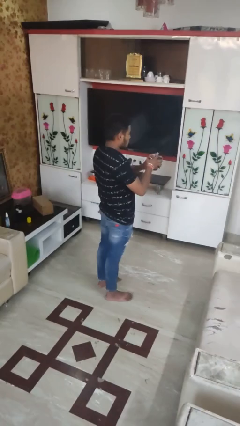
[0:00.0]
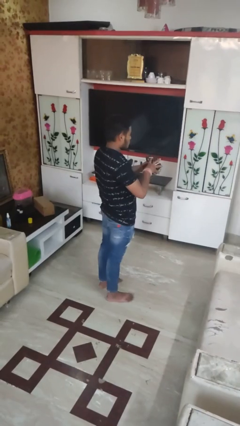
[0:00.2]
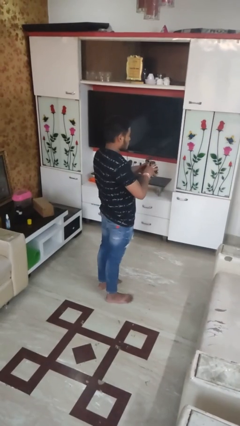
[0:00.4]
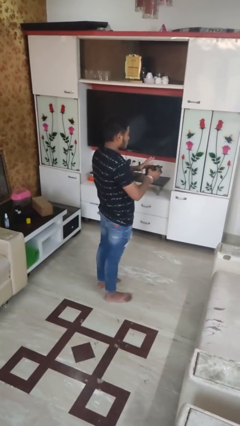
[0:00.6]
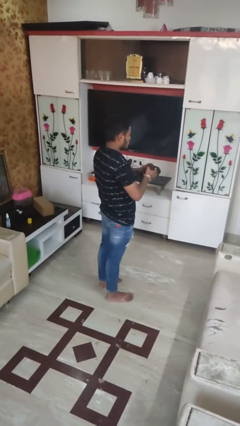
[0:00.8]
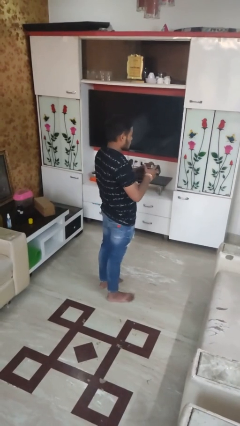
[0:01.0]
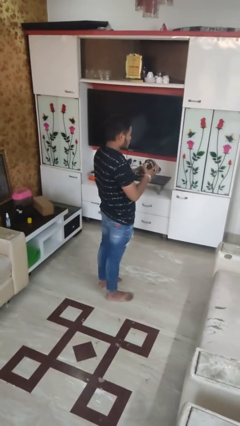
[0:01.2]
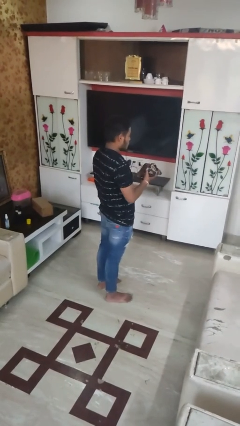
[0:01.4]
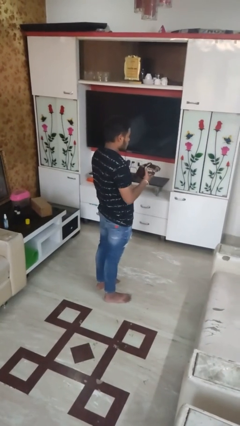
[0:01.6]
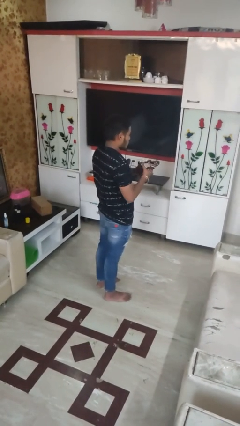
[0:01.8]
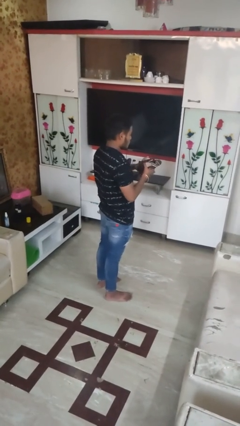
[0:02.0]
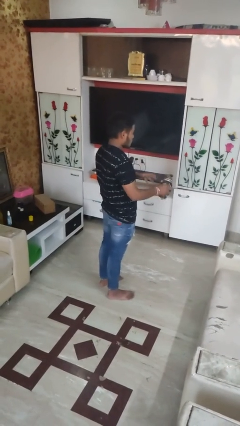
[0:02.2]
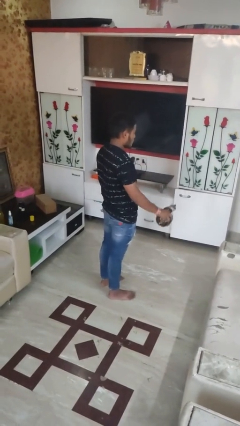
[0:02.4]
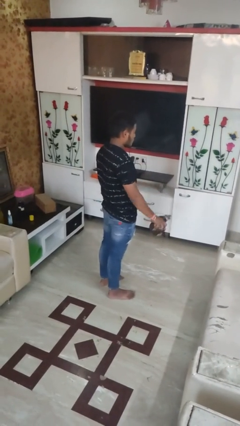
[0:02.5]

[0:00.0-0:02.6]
person squeezes object

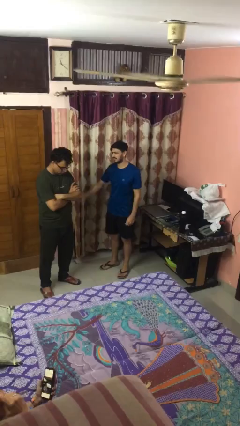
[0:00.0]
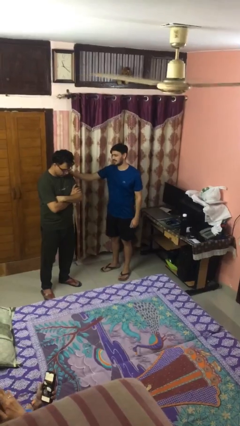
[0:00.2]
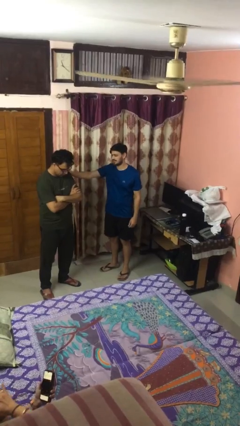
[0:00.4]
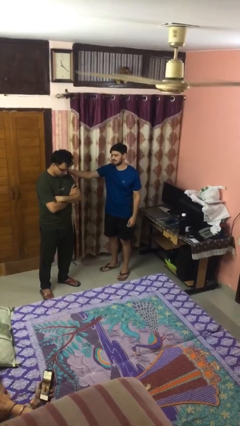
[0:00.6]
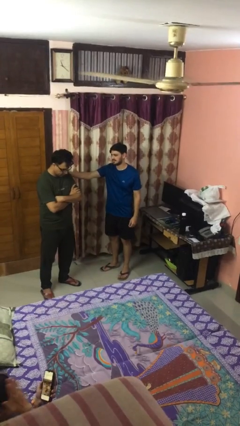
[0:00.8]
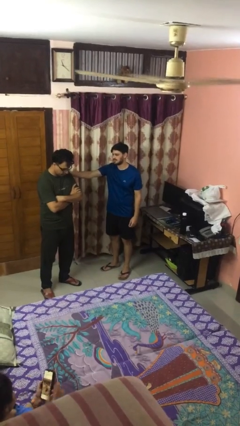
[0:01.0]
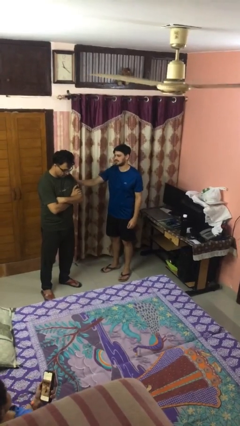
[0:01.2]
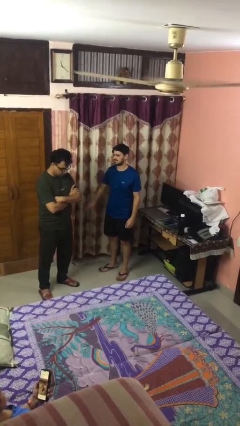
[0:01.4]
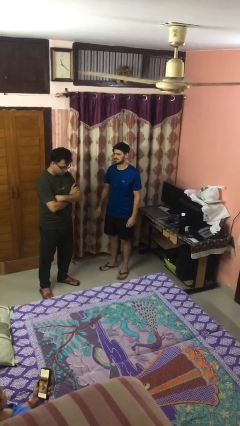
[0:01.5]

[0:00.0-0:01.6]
person pounds shoulders of person

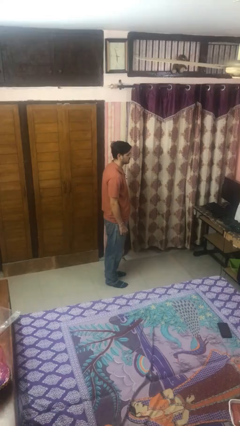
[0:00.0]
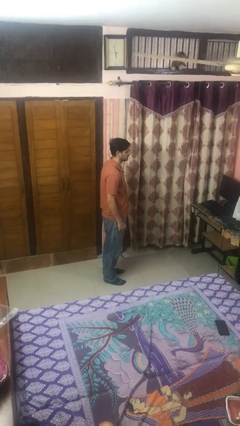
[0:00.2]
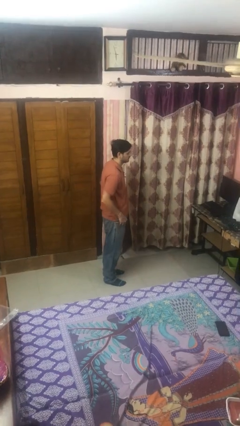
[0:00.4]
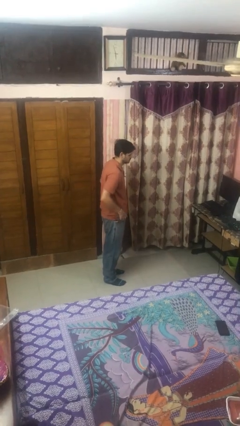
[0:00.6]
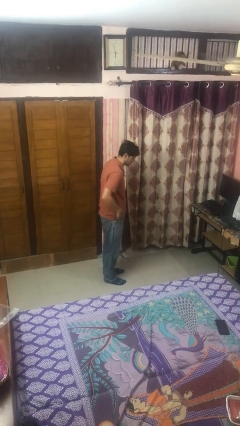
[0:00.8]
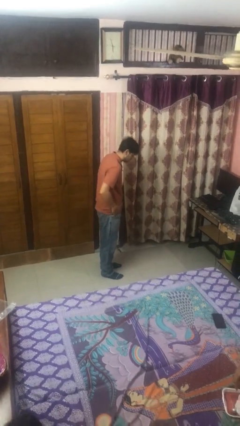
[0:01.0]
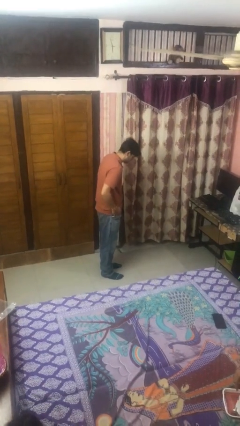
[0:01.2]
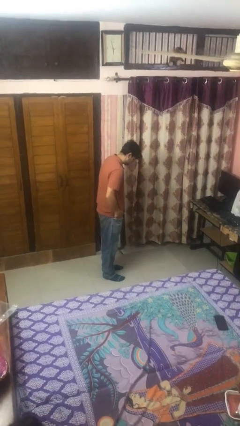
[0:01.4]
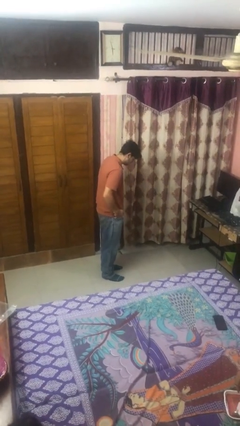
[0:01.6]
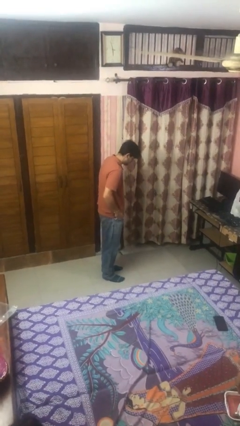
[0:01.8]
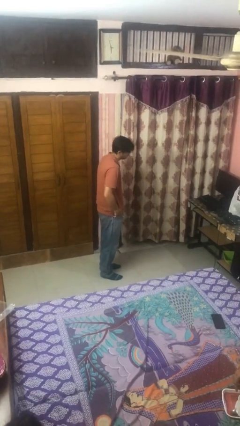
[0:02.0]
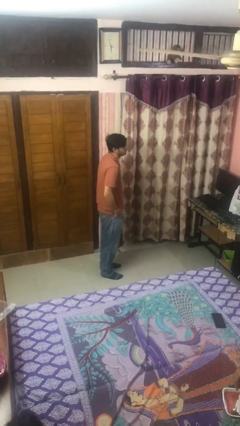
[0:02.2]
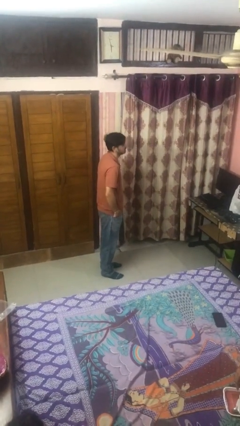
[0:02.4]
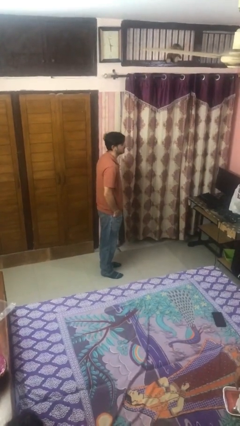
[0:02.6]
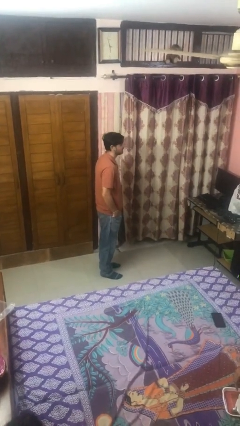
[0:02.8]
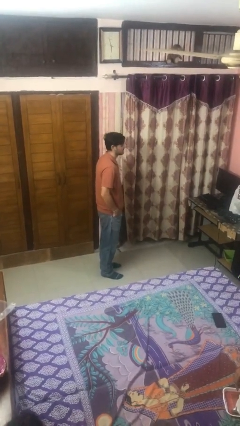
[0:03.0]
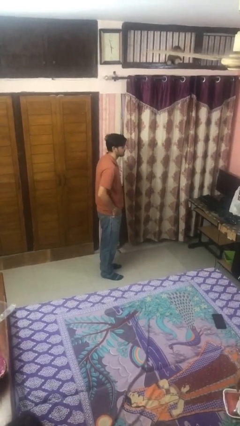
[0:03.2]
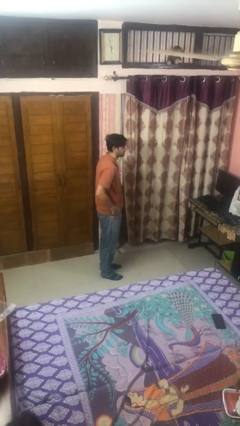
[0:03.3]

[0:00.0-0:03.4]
person puts hands in back pockets

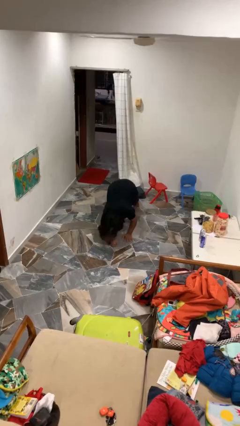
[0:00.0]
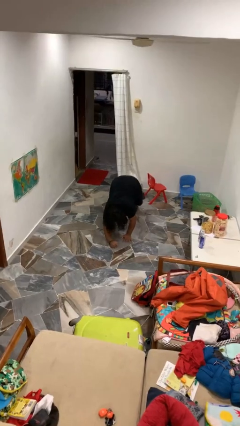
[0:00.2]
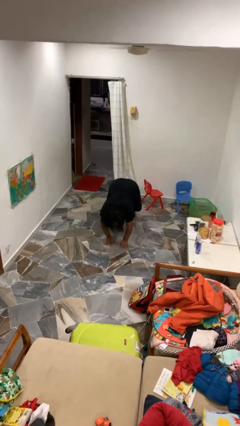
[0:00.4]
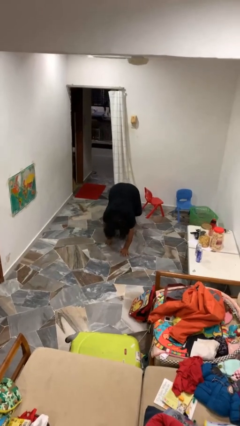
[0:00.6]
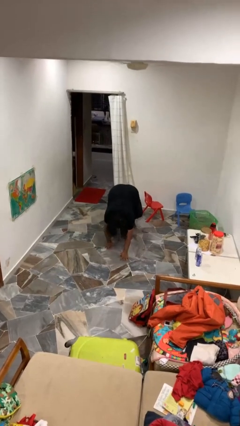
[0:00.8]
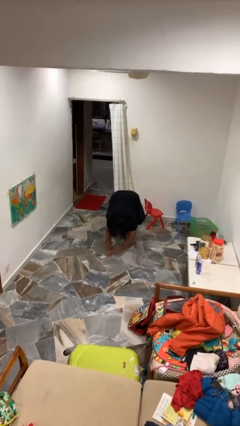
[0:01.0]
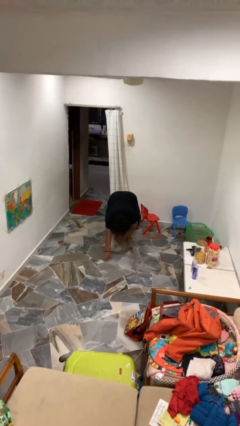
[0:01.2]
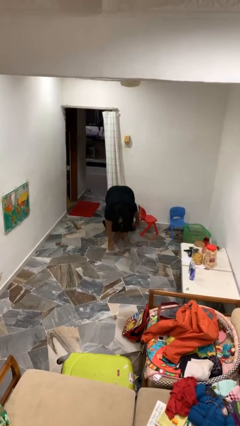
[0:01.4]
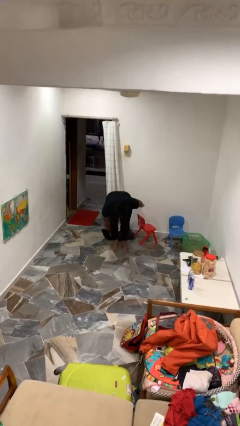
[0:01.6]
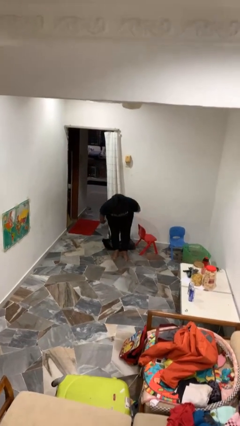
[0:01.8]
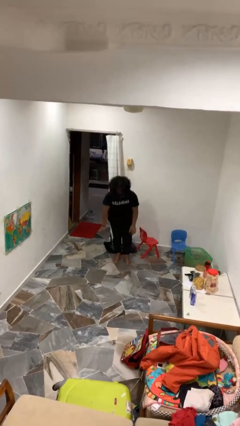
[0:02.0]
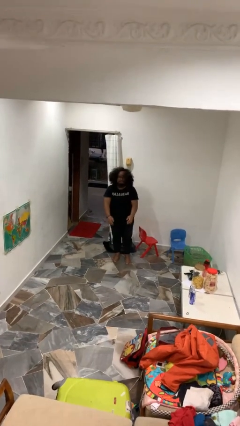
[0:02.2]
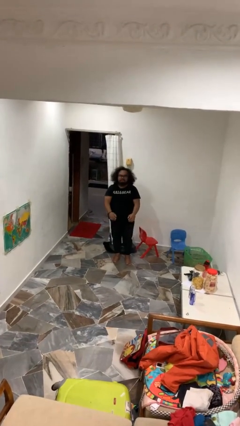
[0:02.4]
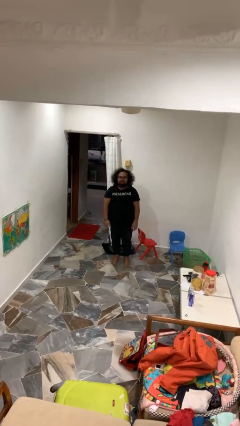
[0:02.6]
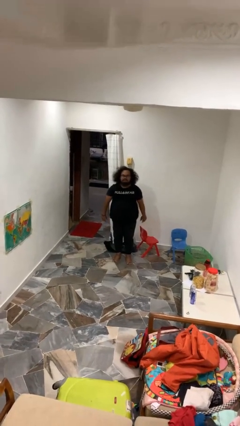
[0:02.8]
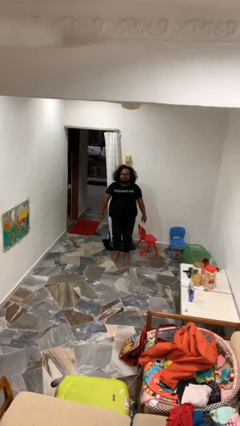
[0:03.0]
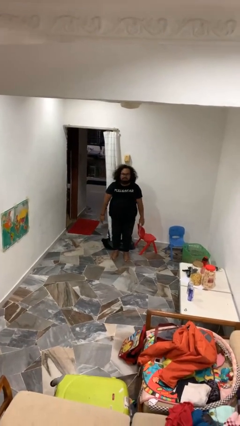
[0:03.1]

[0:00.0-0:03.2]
person stands up from floor

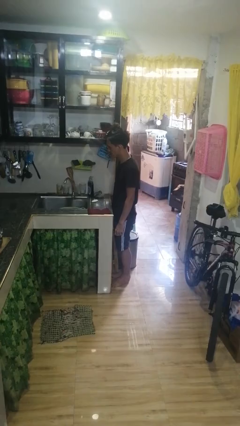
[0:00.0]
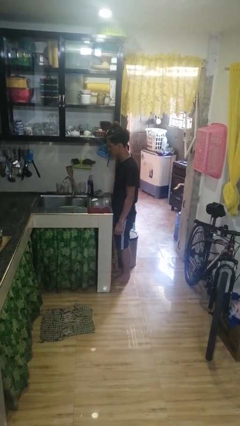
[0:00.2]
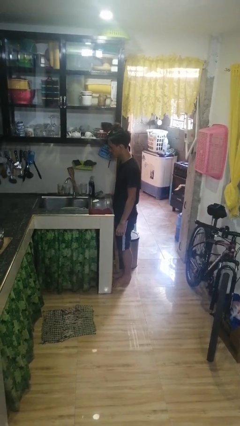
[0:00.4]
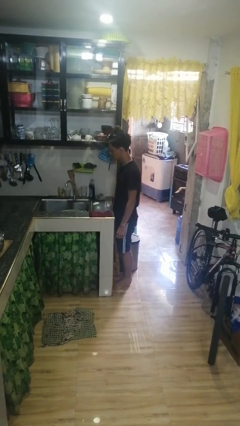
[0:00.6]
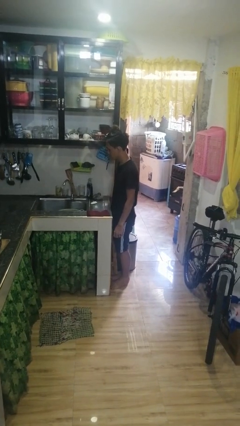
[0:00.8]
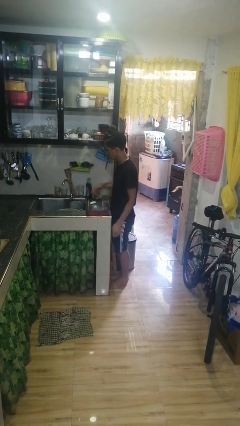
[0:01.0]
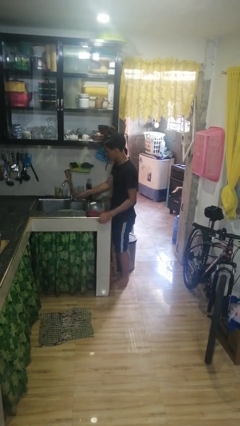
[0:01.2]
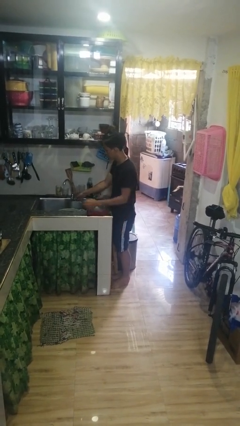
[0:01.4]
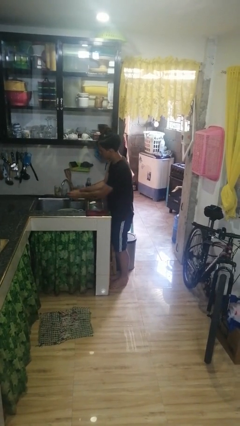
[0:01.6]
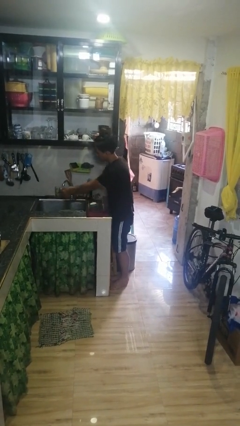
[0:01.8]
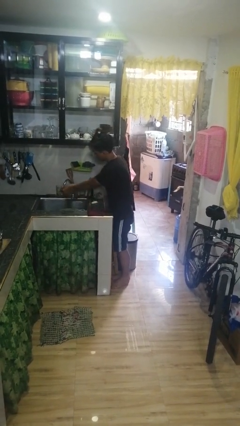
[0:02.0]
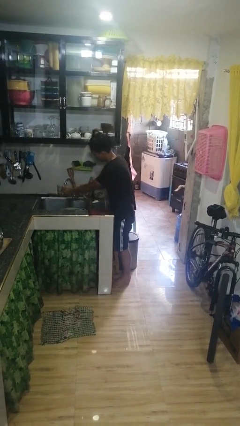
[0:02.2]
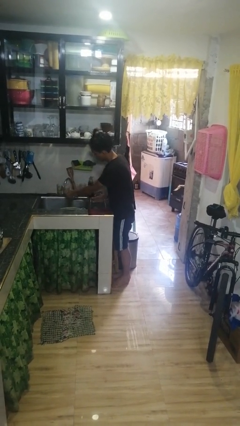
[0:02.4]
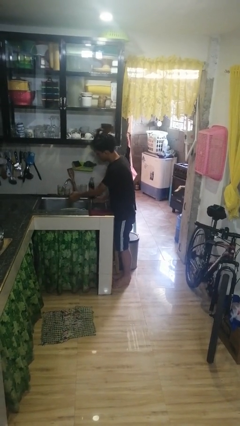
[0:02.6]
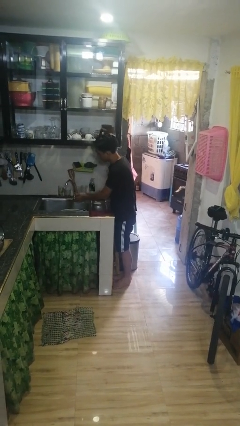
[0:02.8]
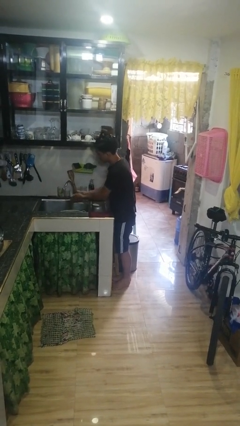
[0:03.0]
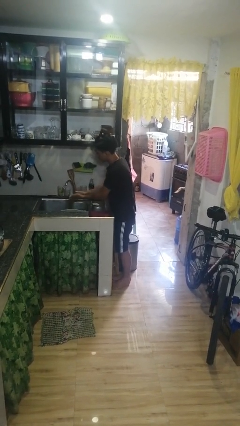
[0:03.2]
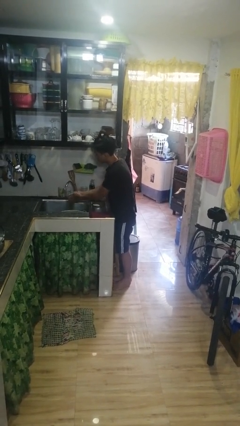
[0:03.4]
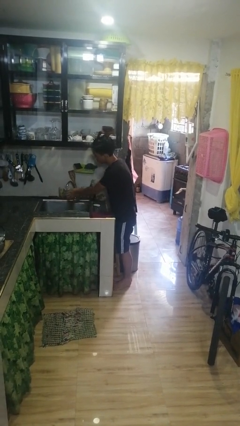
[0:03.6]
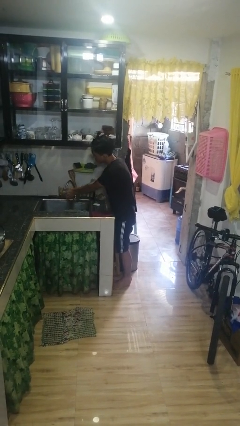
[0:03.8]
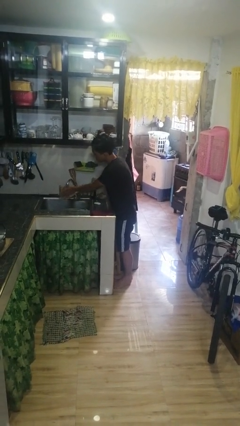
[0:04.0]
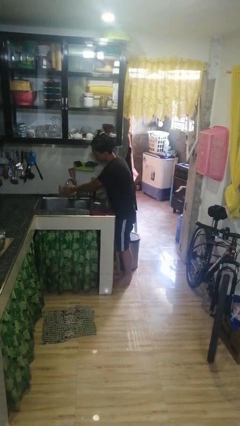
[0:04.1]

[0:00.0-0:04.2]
person washes hands

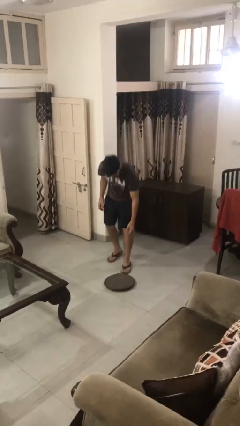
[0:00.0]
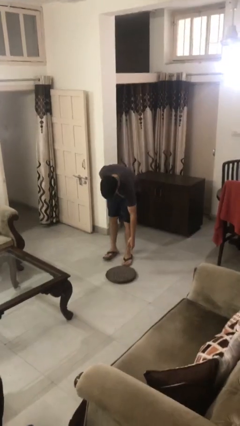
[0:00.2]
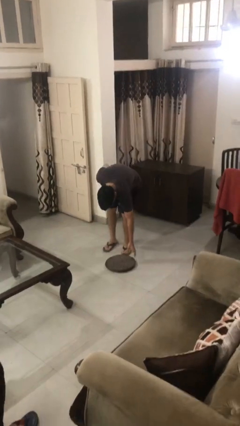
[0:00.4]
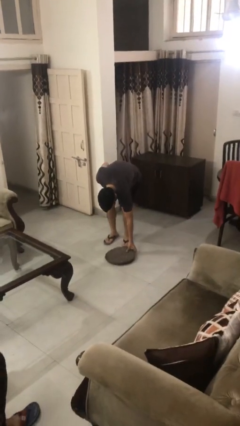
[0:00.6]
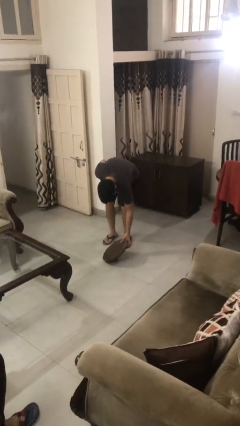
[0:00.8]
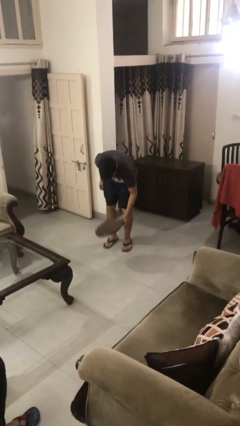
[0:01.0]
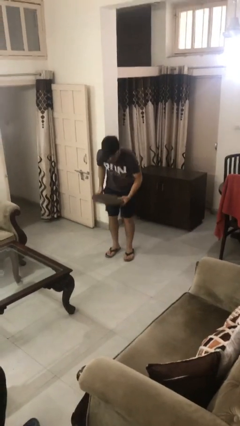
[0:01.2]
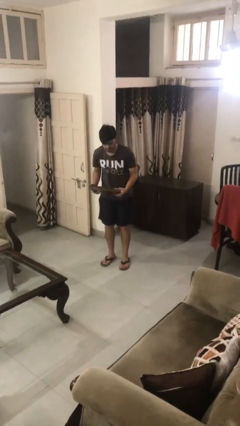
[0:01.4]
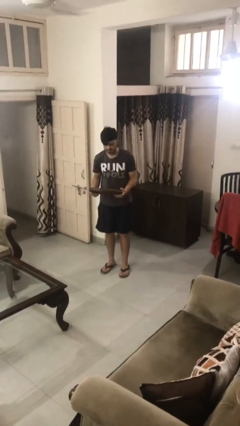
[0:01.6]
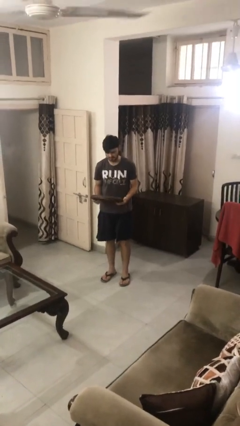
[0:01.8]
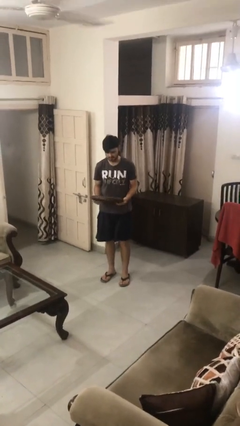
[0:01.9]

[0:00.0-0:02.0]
person picks up object from floor

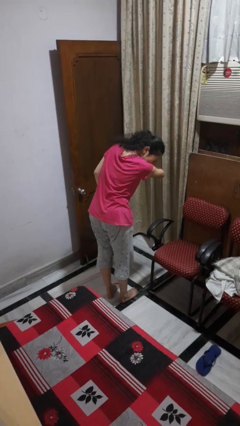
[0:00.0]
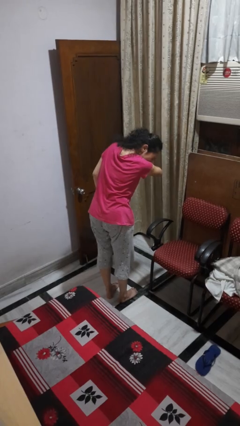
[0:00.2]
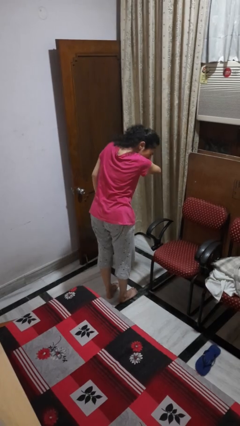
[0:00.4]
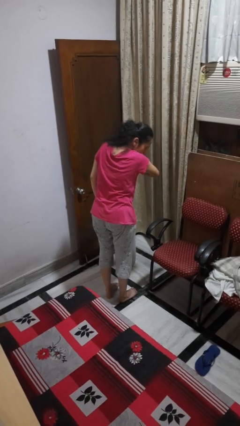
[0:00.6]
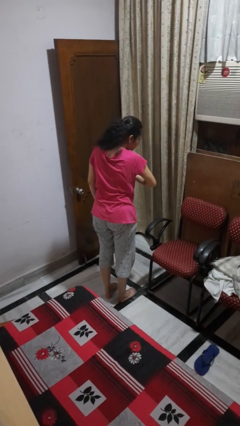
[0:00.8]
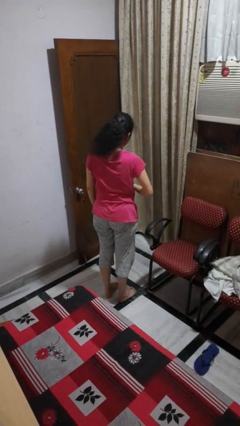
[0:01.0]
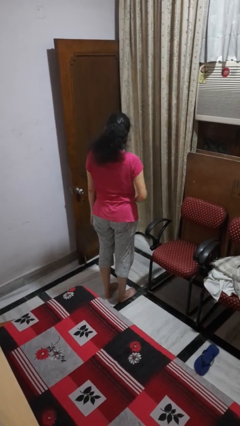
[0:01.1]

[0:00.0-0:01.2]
person sneezes into arm
